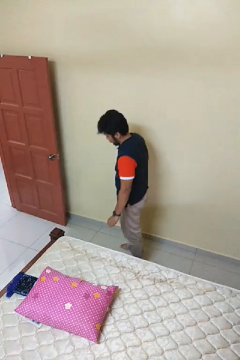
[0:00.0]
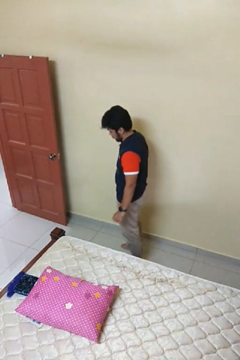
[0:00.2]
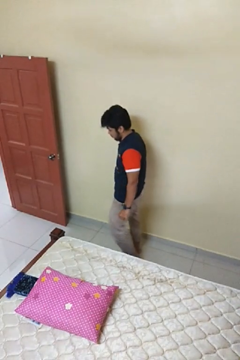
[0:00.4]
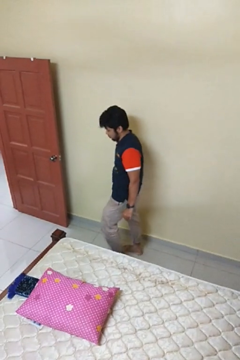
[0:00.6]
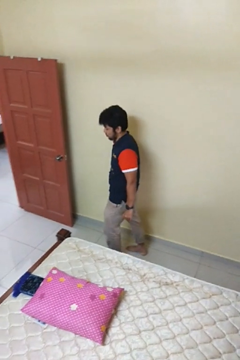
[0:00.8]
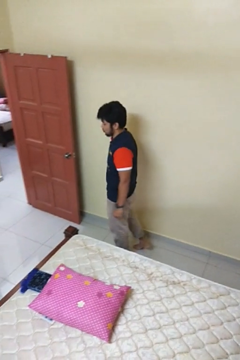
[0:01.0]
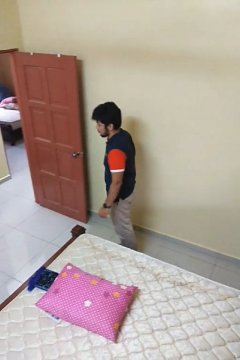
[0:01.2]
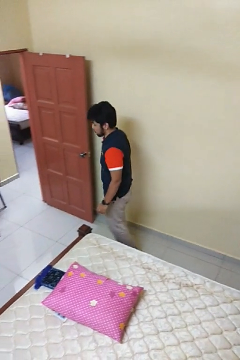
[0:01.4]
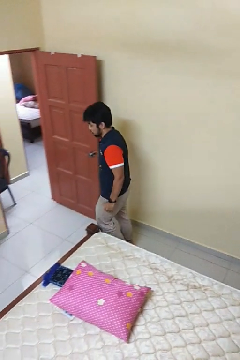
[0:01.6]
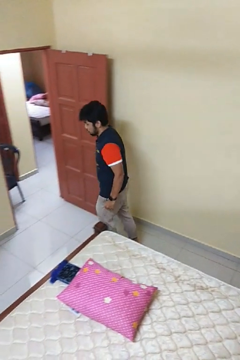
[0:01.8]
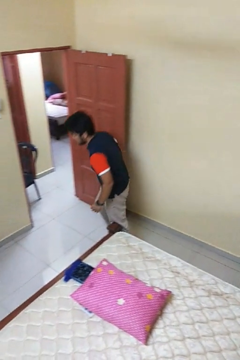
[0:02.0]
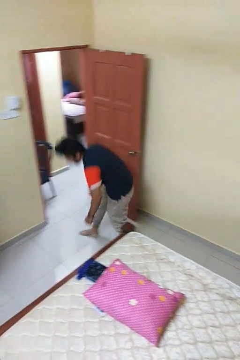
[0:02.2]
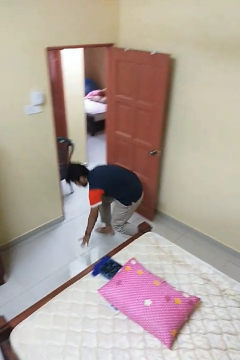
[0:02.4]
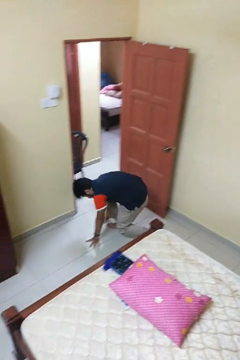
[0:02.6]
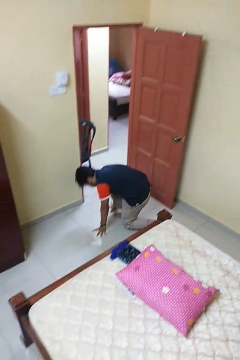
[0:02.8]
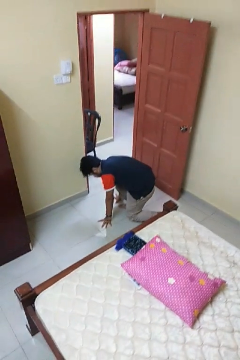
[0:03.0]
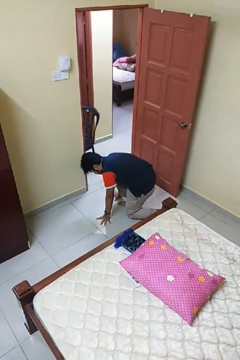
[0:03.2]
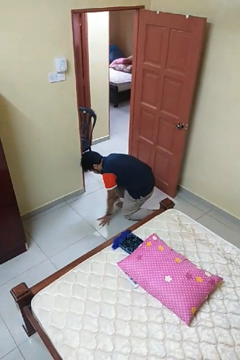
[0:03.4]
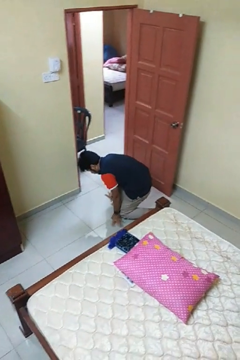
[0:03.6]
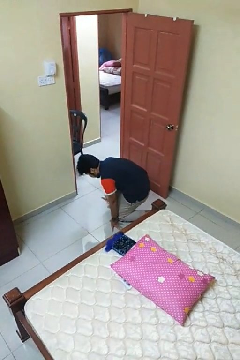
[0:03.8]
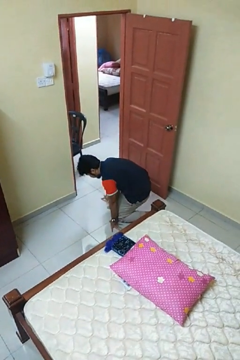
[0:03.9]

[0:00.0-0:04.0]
person trips on object on floor

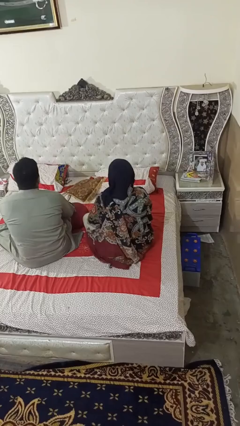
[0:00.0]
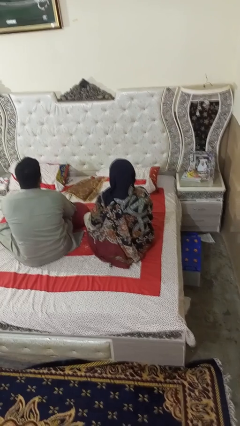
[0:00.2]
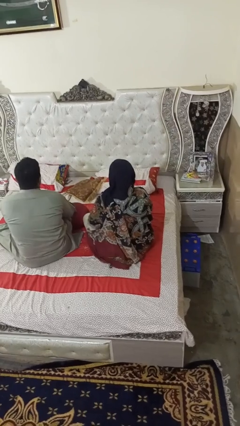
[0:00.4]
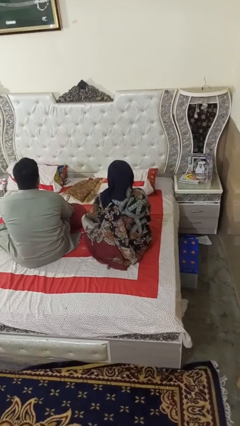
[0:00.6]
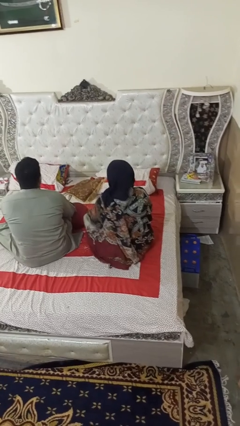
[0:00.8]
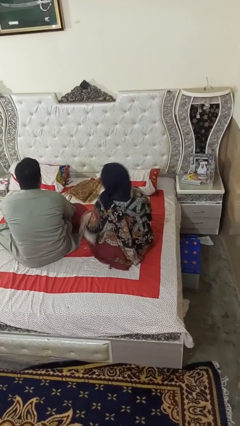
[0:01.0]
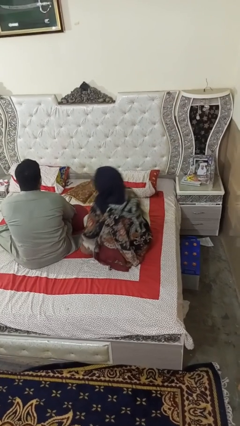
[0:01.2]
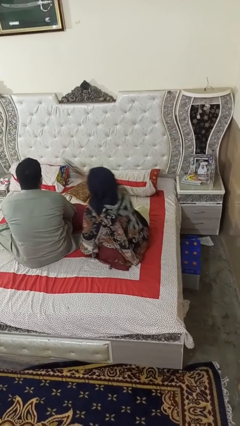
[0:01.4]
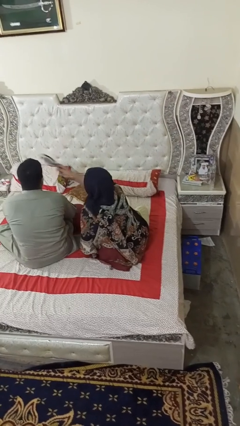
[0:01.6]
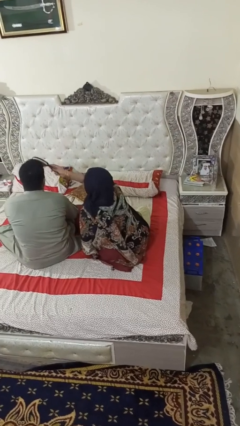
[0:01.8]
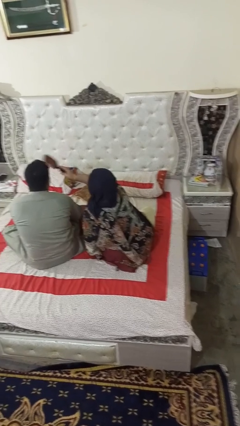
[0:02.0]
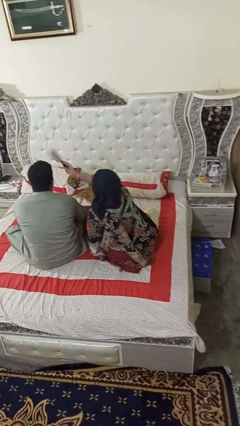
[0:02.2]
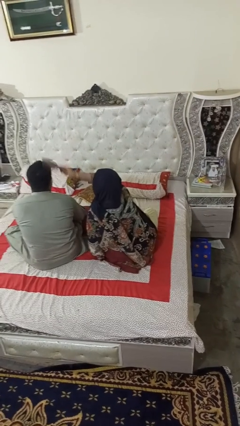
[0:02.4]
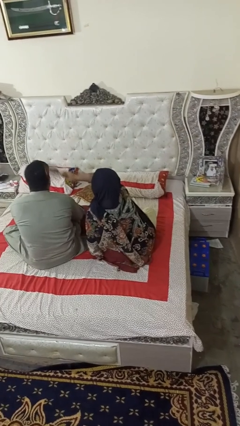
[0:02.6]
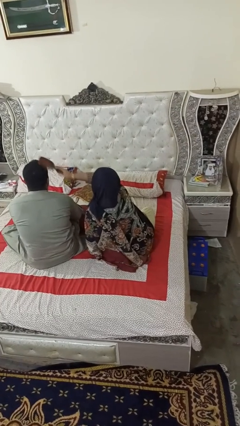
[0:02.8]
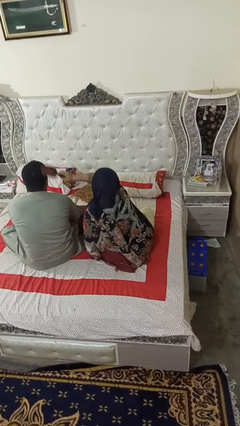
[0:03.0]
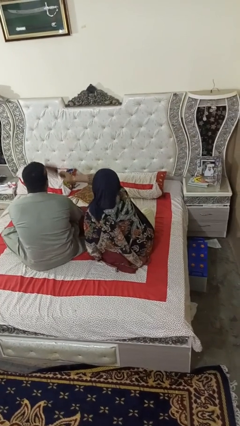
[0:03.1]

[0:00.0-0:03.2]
person brushes hair of person

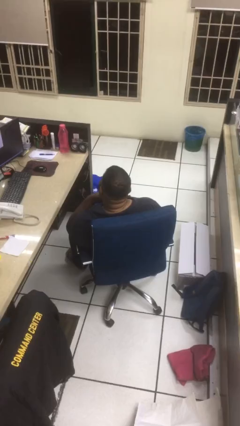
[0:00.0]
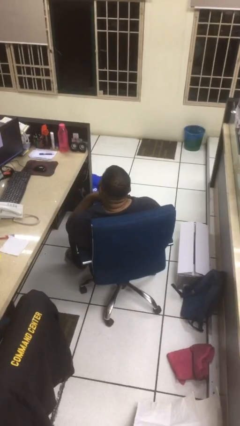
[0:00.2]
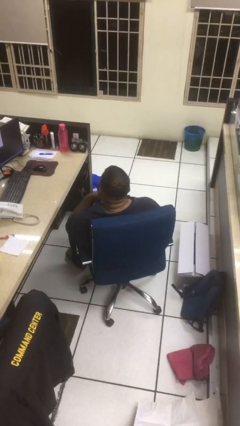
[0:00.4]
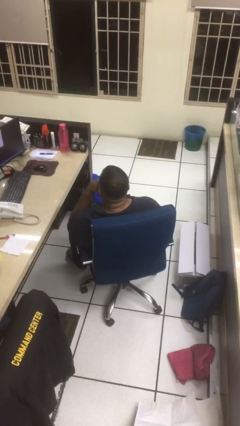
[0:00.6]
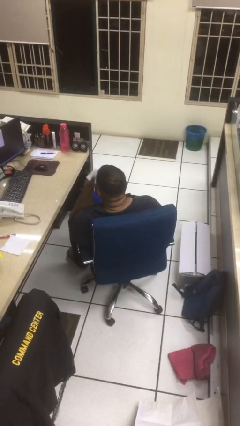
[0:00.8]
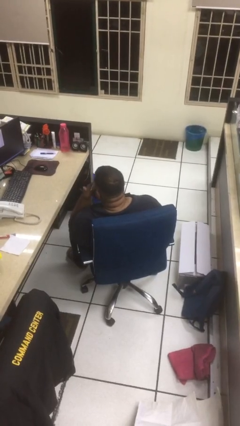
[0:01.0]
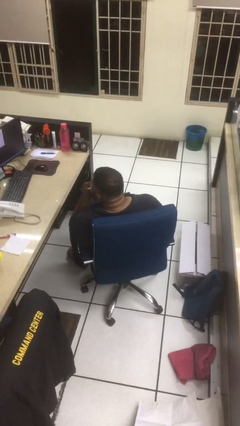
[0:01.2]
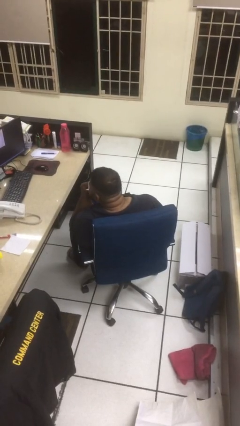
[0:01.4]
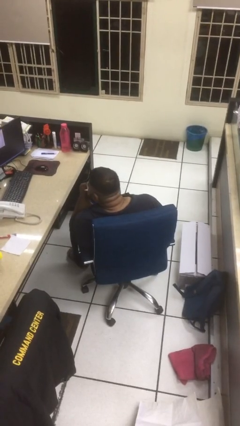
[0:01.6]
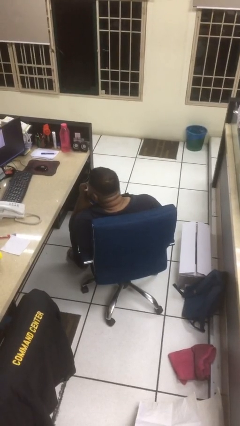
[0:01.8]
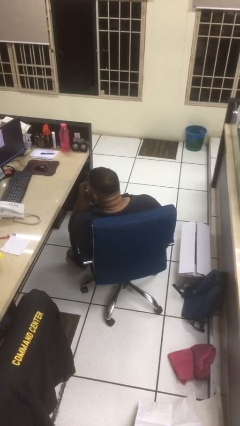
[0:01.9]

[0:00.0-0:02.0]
person blows nose

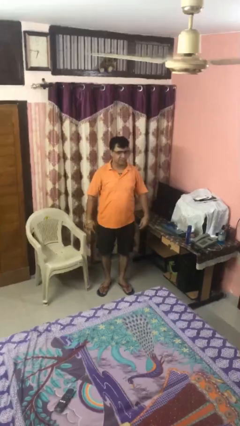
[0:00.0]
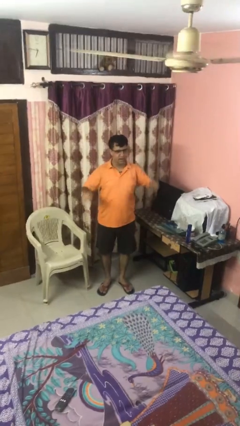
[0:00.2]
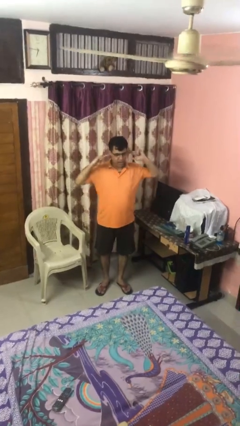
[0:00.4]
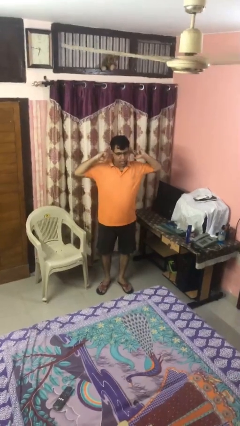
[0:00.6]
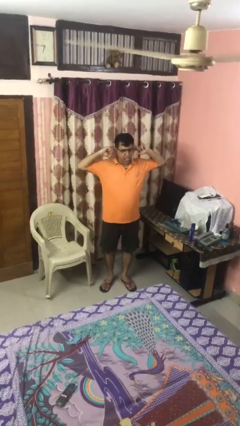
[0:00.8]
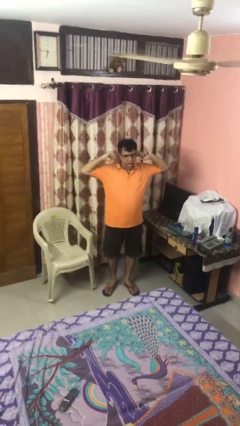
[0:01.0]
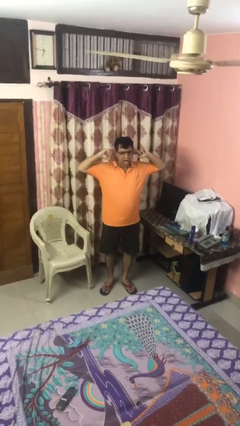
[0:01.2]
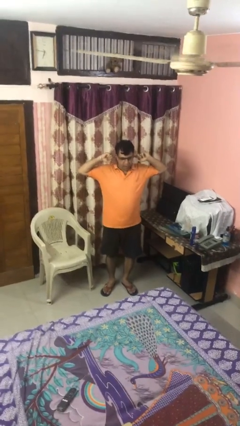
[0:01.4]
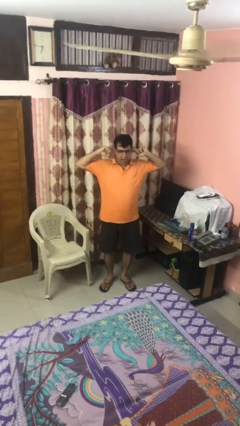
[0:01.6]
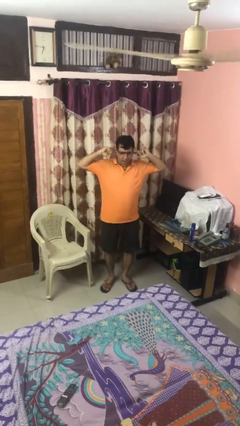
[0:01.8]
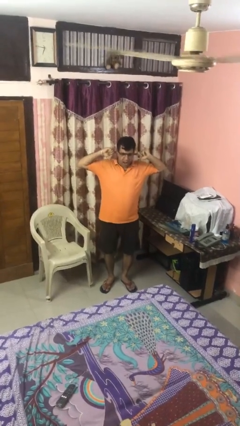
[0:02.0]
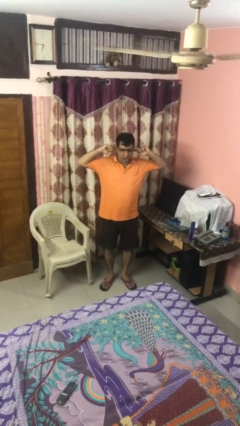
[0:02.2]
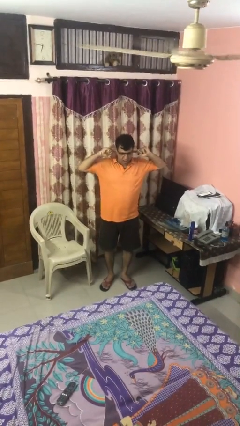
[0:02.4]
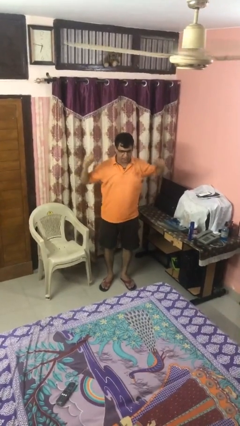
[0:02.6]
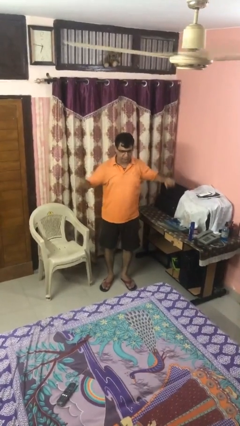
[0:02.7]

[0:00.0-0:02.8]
person puts fingers in ear

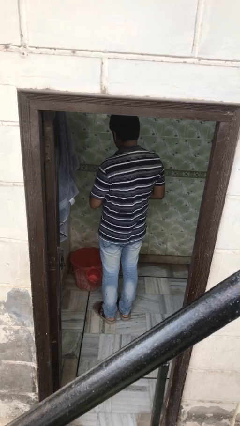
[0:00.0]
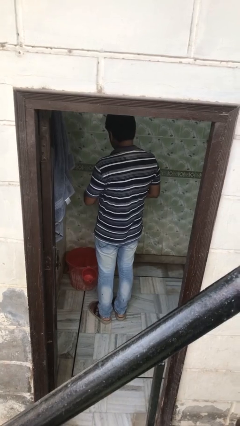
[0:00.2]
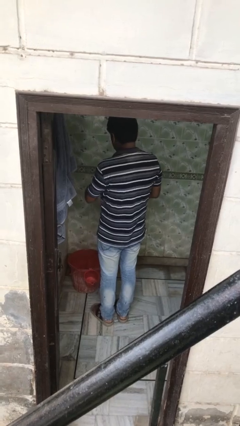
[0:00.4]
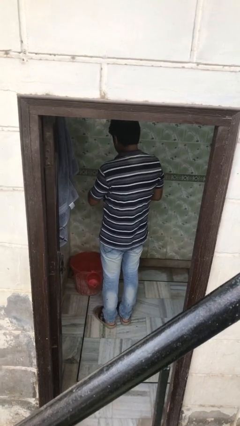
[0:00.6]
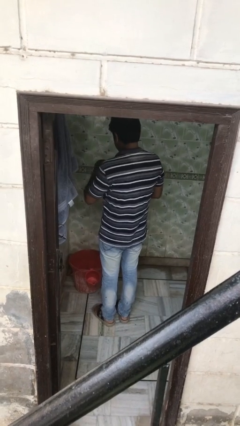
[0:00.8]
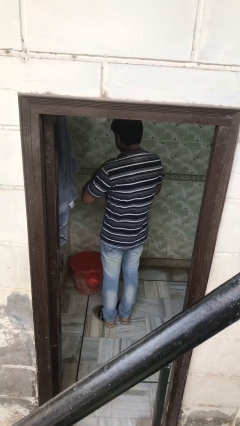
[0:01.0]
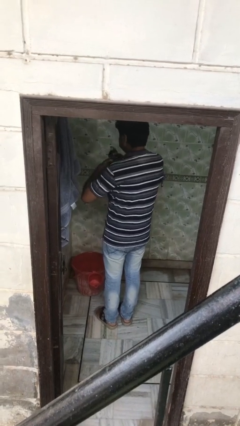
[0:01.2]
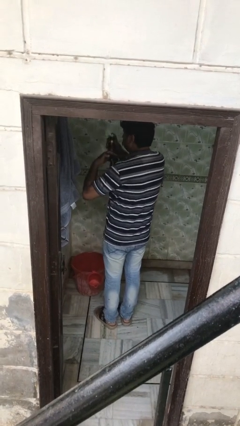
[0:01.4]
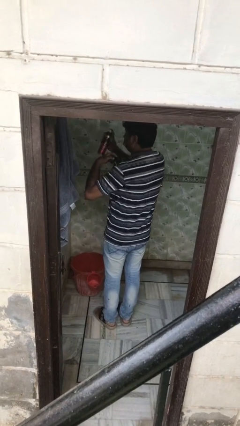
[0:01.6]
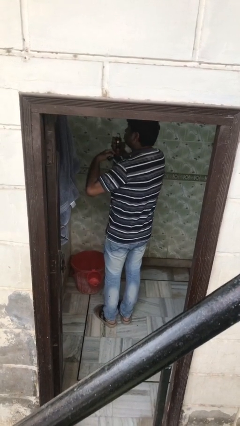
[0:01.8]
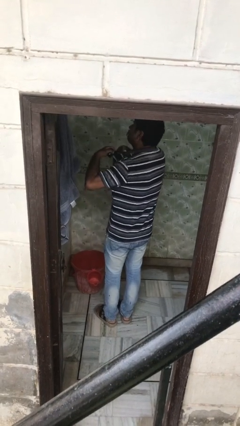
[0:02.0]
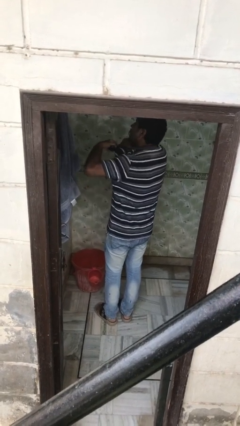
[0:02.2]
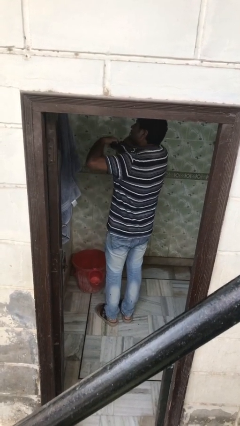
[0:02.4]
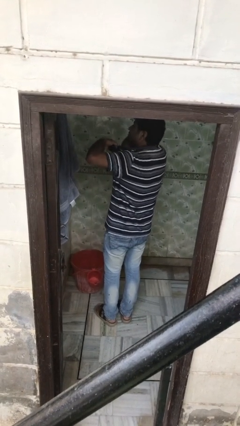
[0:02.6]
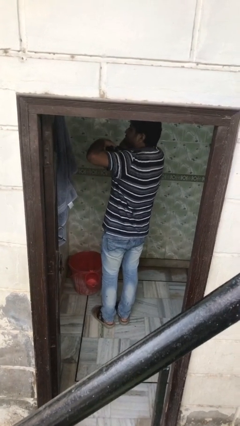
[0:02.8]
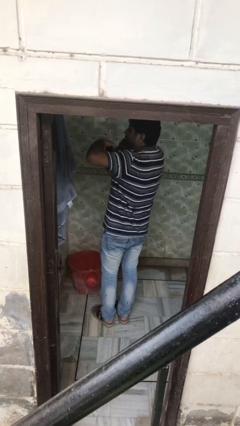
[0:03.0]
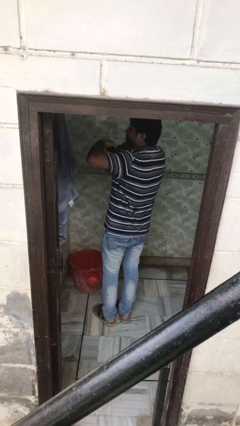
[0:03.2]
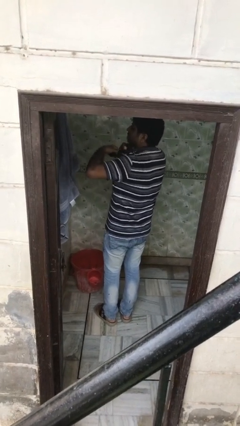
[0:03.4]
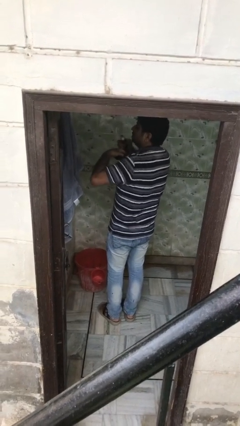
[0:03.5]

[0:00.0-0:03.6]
person applies deodorant

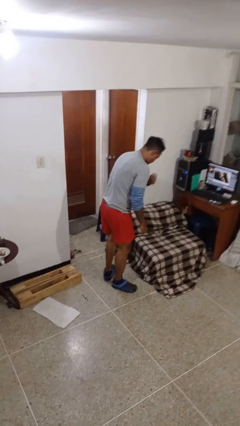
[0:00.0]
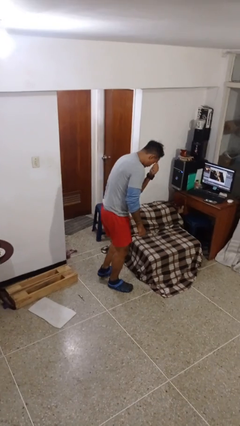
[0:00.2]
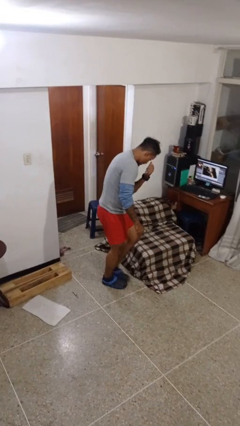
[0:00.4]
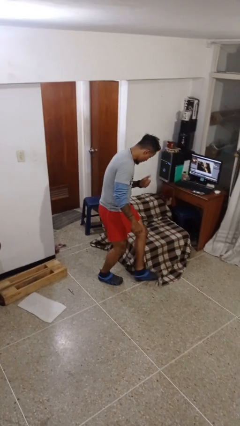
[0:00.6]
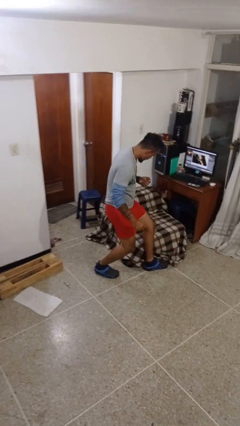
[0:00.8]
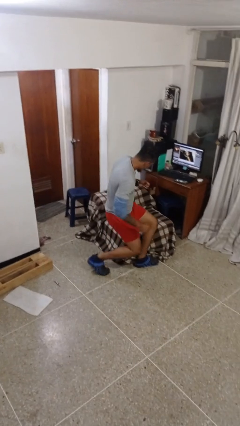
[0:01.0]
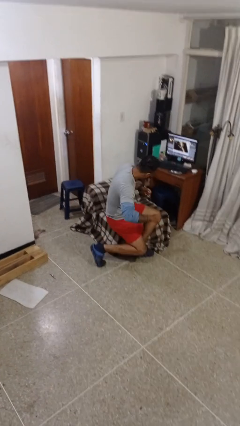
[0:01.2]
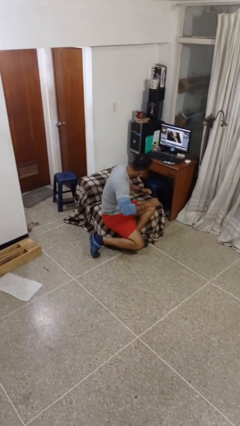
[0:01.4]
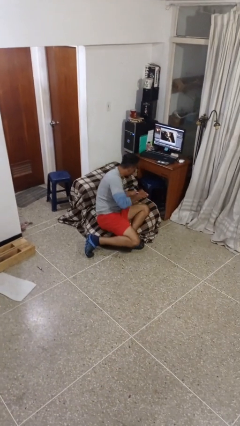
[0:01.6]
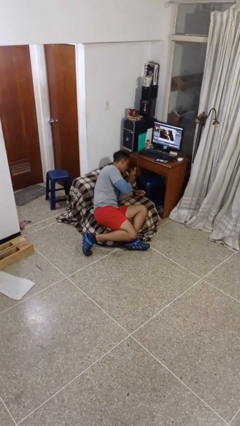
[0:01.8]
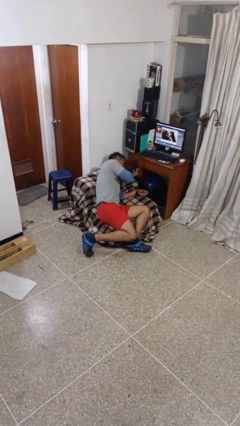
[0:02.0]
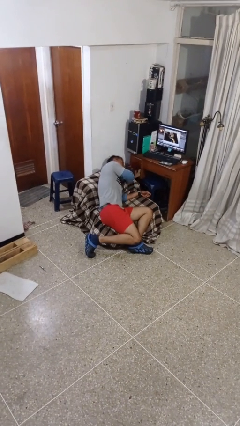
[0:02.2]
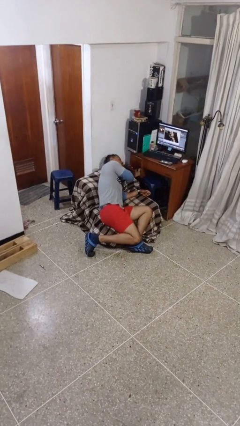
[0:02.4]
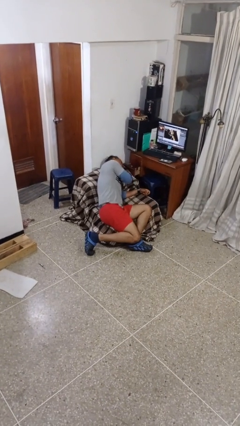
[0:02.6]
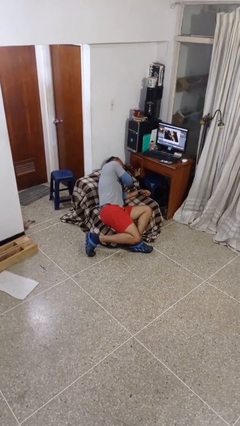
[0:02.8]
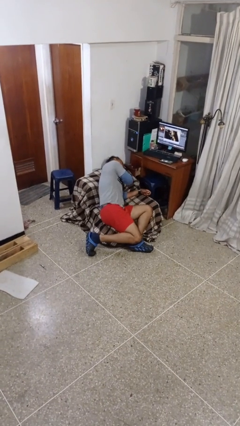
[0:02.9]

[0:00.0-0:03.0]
person lies down on couch
